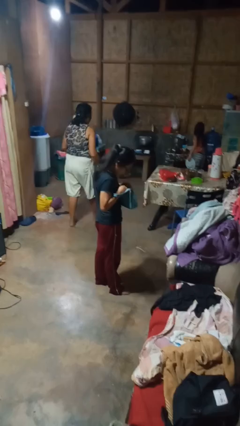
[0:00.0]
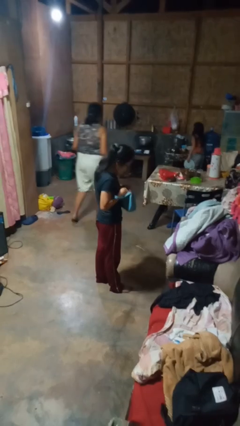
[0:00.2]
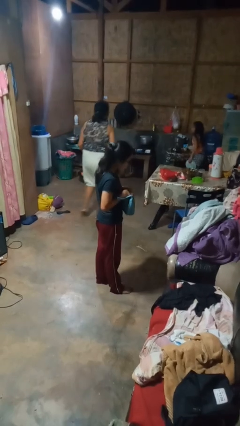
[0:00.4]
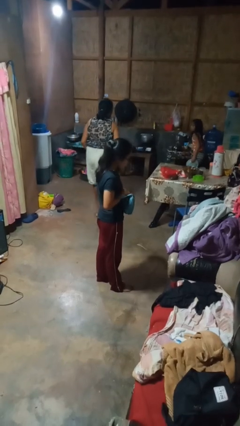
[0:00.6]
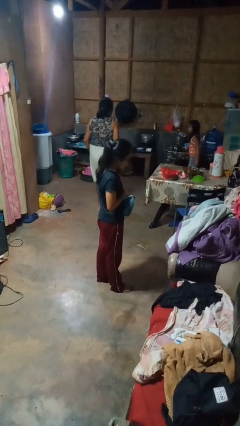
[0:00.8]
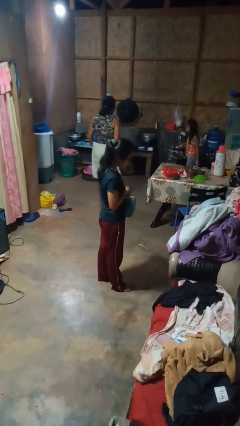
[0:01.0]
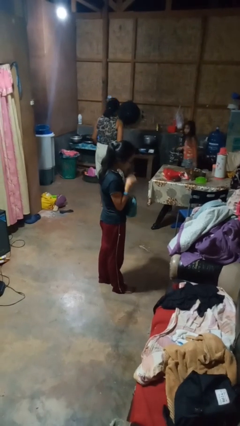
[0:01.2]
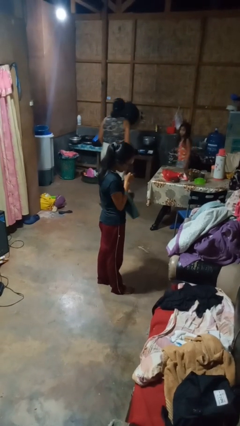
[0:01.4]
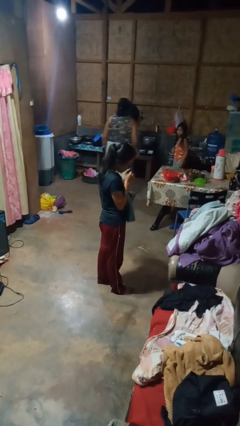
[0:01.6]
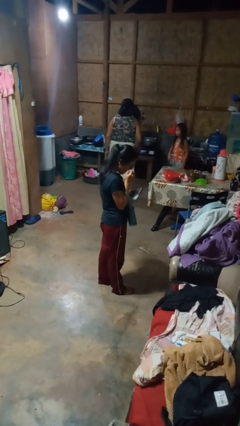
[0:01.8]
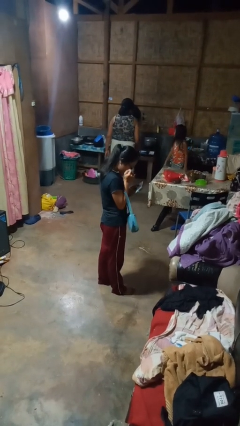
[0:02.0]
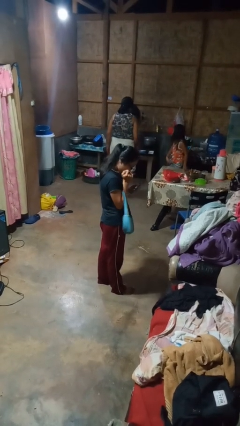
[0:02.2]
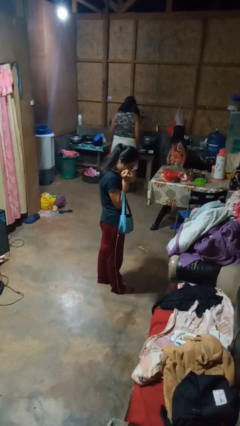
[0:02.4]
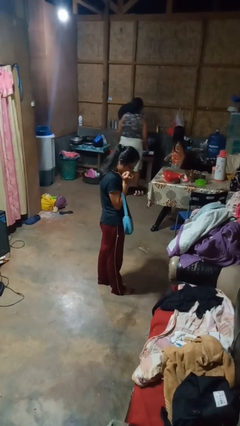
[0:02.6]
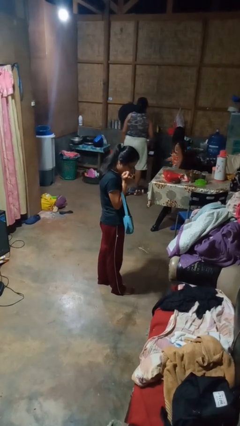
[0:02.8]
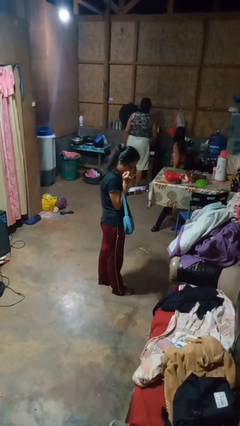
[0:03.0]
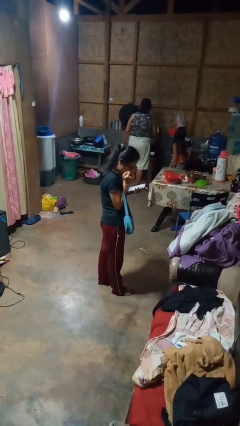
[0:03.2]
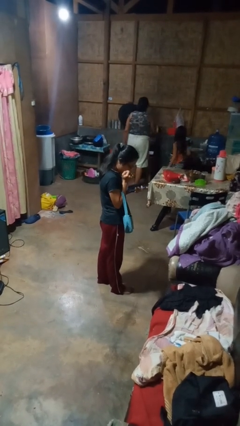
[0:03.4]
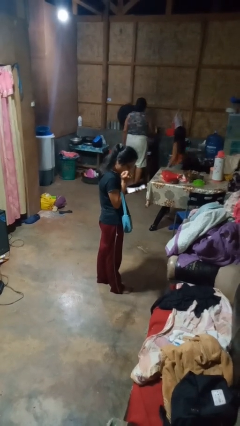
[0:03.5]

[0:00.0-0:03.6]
person takes object from purse

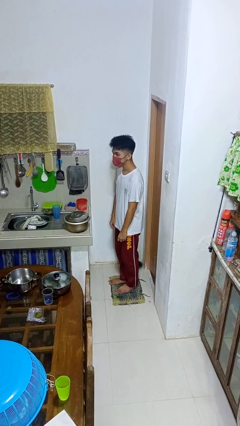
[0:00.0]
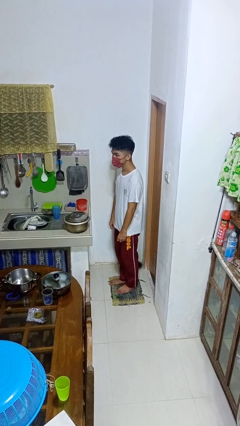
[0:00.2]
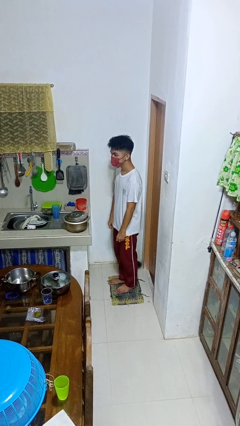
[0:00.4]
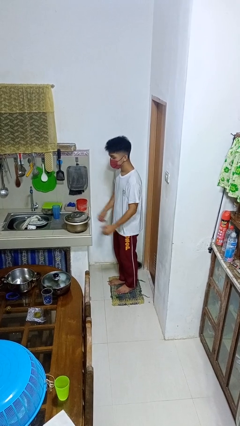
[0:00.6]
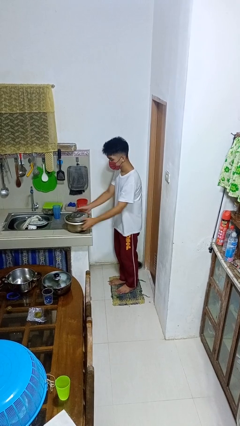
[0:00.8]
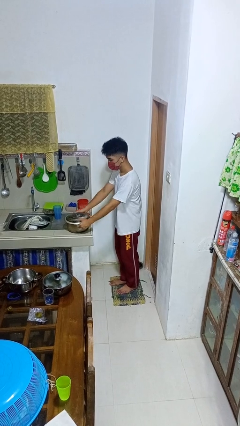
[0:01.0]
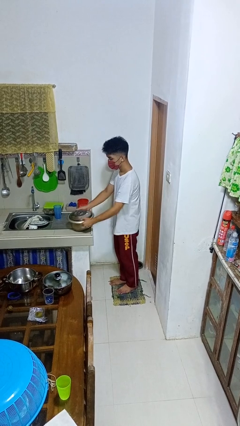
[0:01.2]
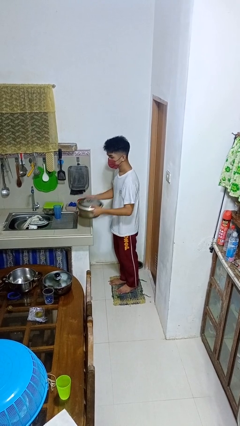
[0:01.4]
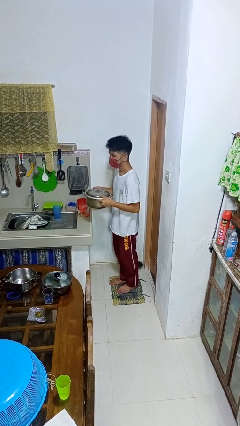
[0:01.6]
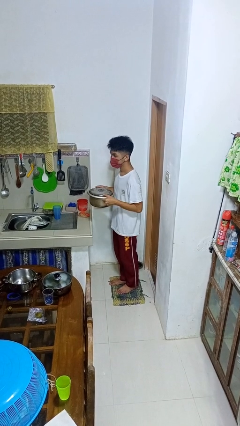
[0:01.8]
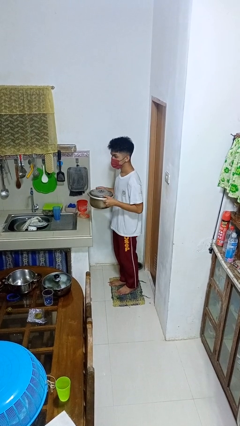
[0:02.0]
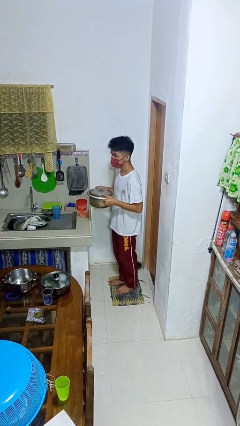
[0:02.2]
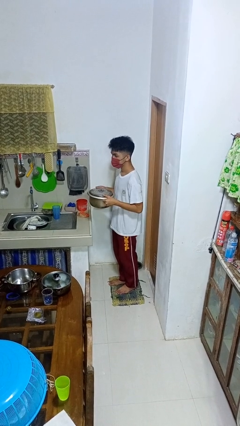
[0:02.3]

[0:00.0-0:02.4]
person picks up object from countertop

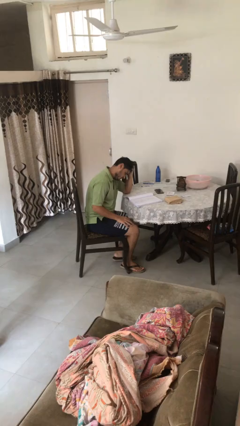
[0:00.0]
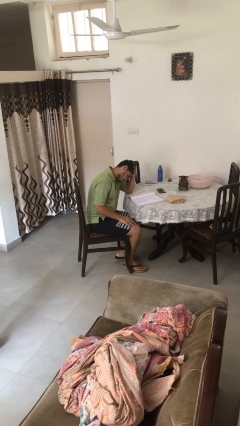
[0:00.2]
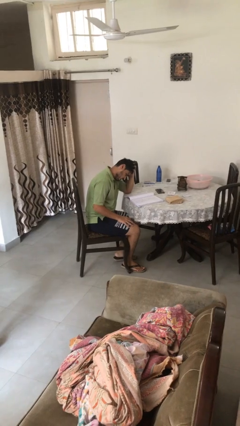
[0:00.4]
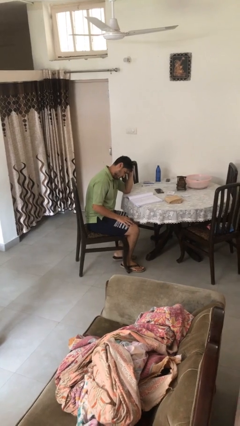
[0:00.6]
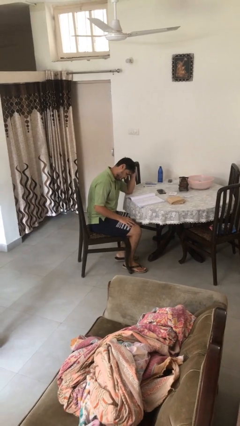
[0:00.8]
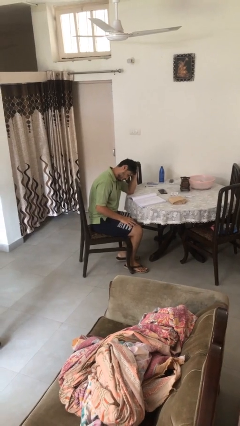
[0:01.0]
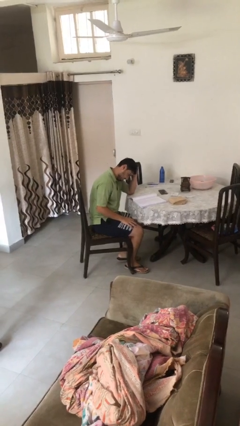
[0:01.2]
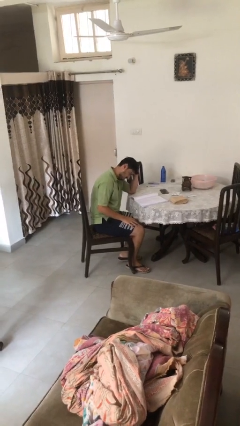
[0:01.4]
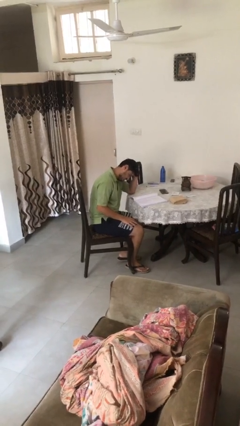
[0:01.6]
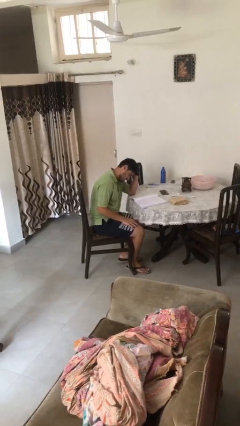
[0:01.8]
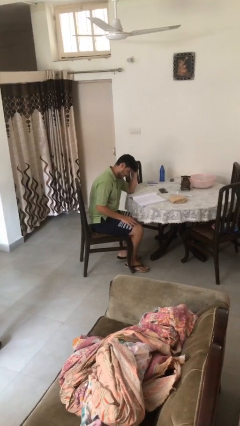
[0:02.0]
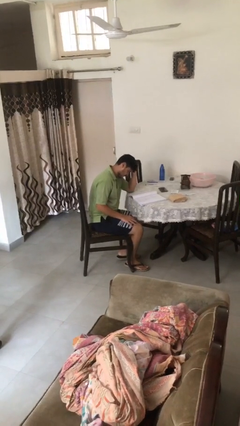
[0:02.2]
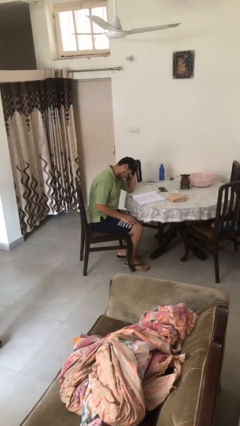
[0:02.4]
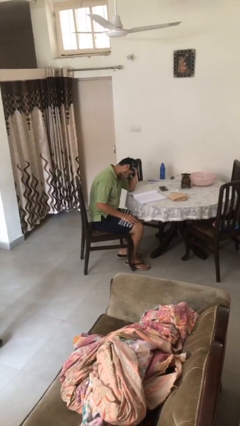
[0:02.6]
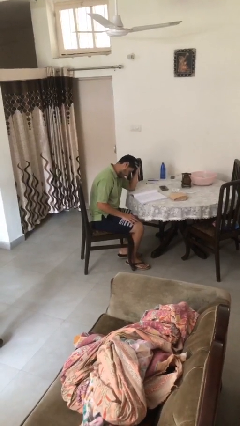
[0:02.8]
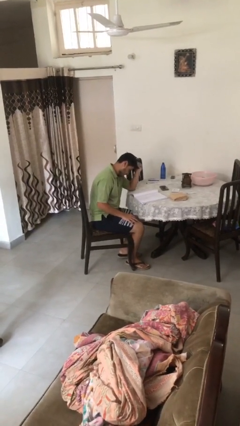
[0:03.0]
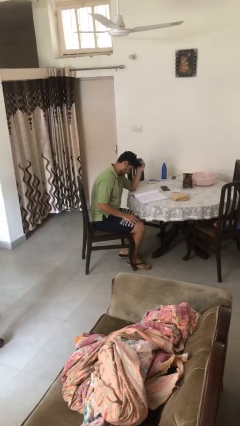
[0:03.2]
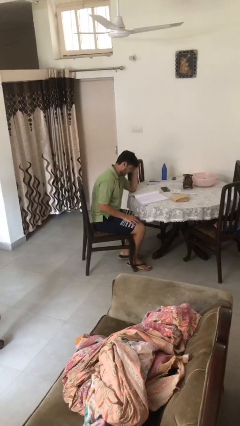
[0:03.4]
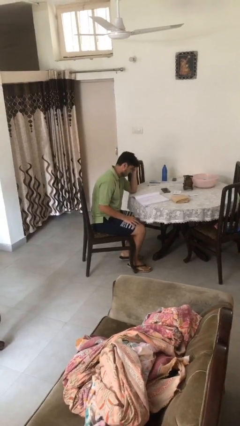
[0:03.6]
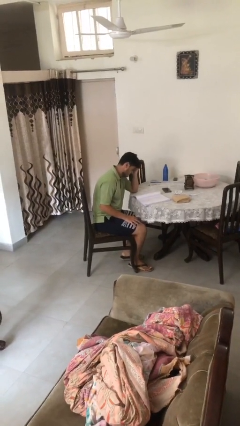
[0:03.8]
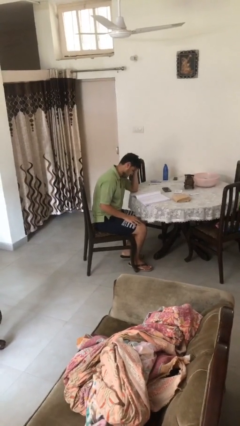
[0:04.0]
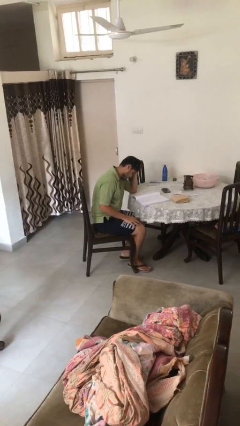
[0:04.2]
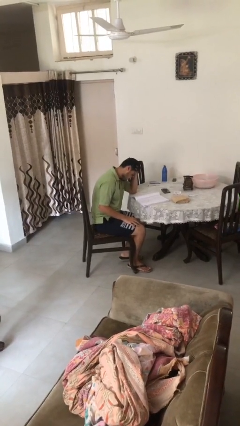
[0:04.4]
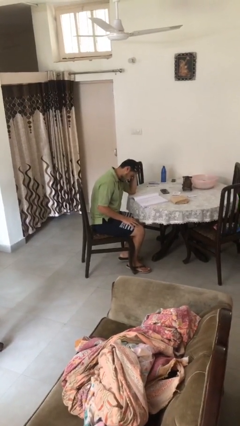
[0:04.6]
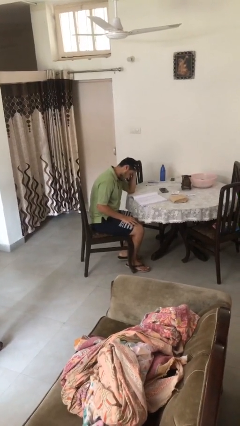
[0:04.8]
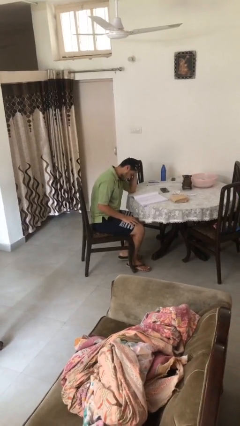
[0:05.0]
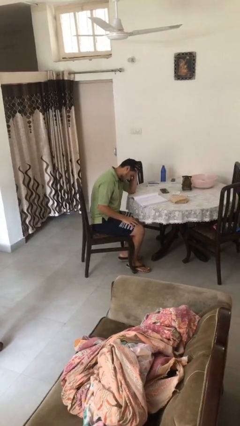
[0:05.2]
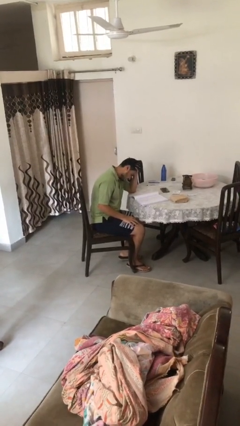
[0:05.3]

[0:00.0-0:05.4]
person reads document

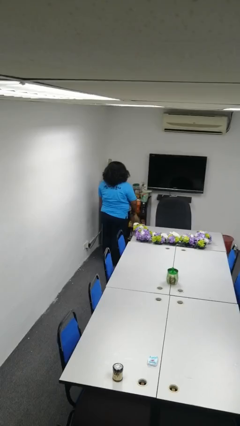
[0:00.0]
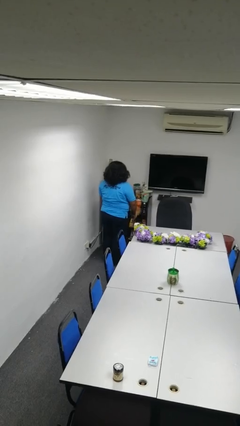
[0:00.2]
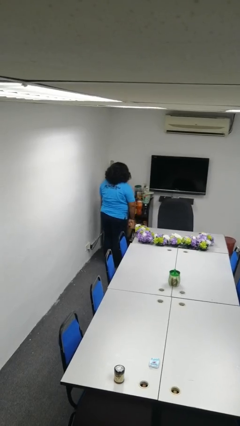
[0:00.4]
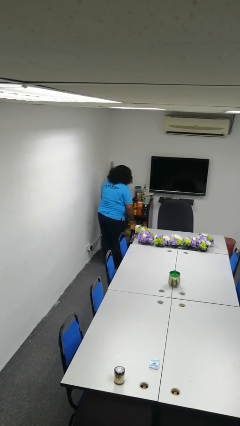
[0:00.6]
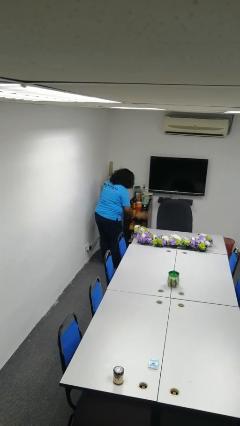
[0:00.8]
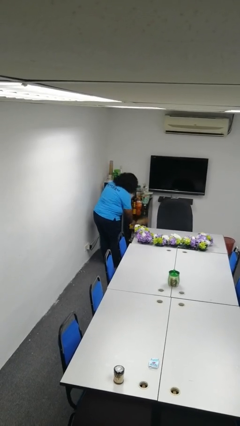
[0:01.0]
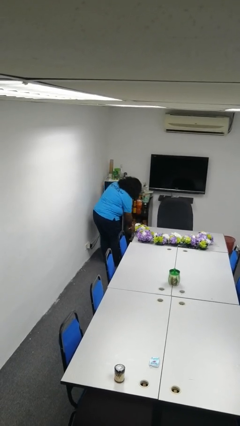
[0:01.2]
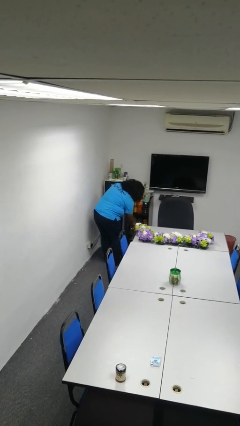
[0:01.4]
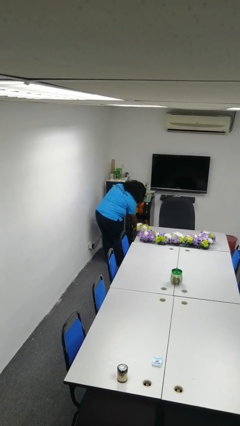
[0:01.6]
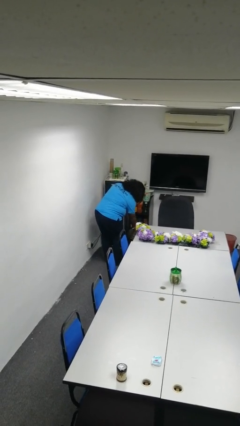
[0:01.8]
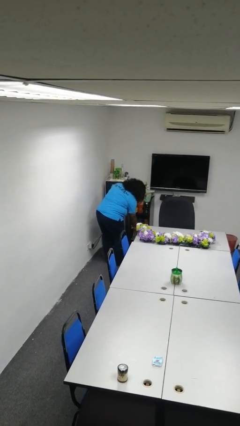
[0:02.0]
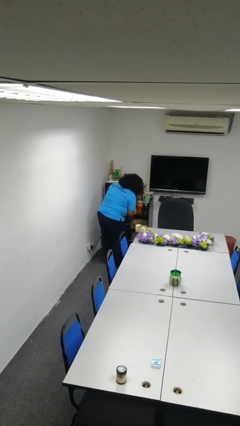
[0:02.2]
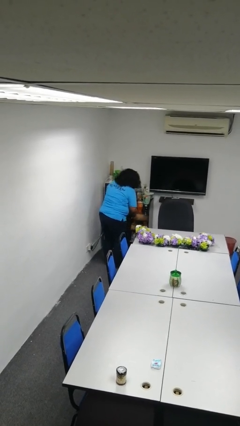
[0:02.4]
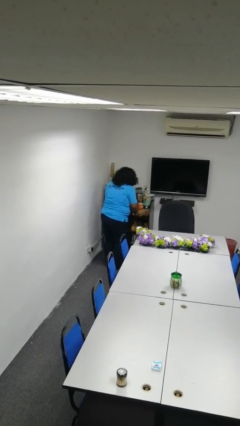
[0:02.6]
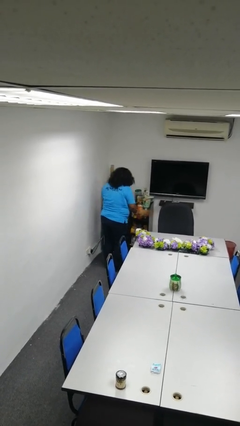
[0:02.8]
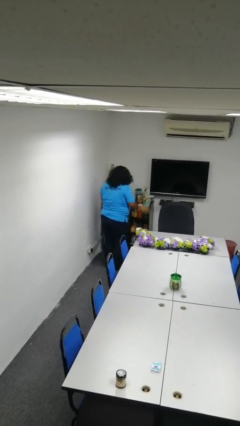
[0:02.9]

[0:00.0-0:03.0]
person dusts furniture

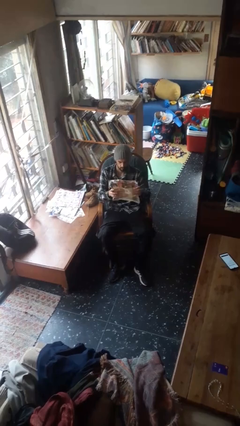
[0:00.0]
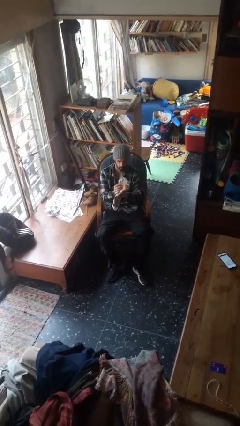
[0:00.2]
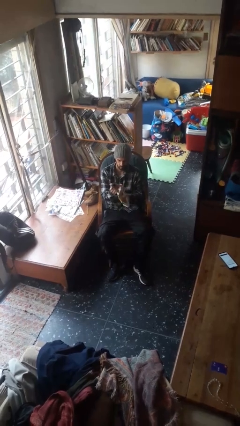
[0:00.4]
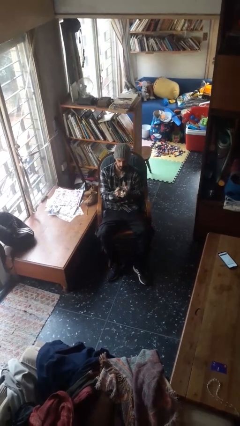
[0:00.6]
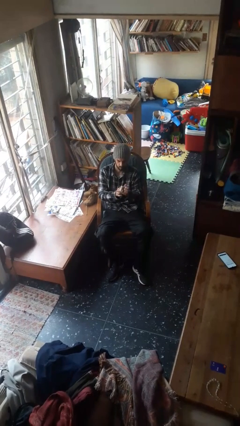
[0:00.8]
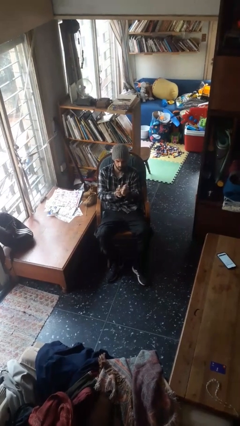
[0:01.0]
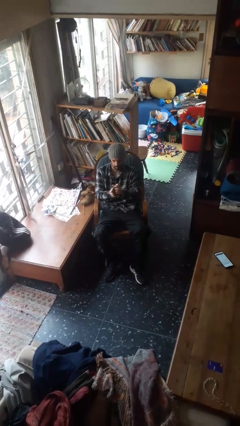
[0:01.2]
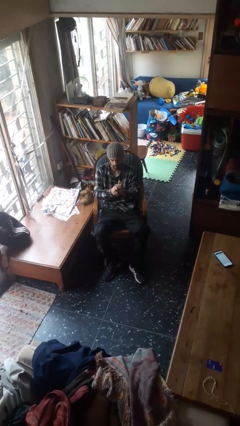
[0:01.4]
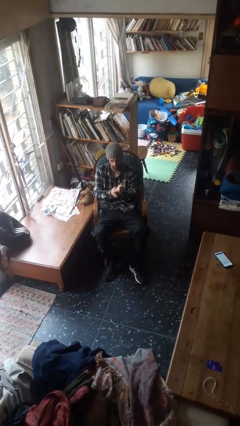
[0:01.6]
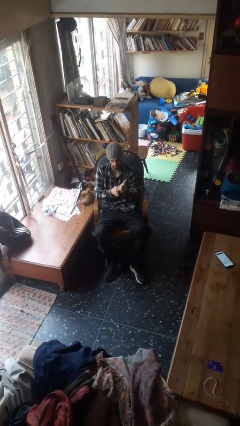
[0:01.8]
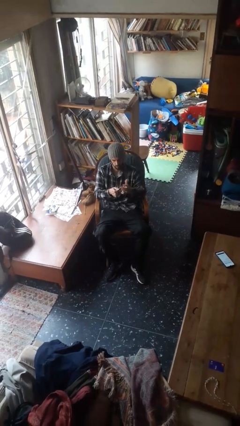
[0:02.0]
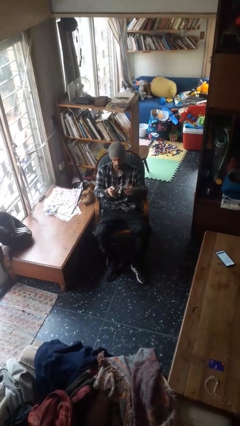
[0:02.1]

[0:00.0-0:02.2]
person crumples paper

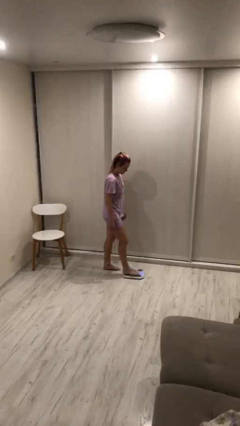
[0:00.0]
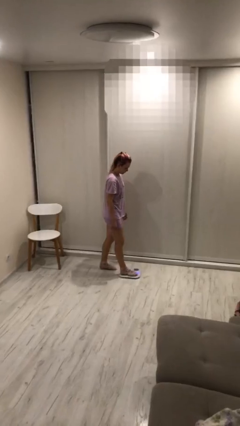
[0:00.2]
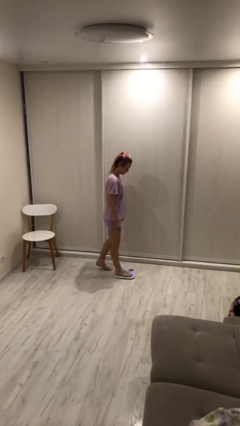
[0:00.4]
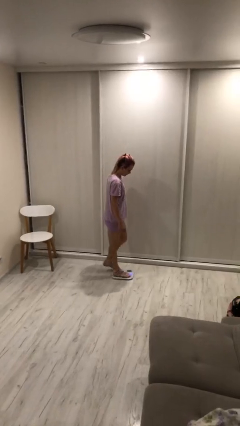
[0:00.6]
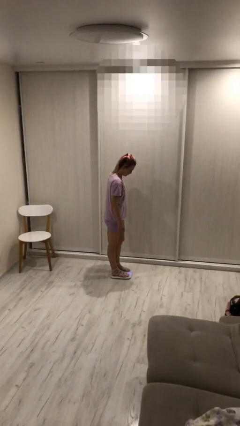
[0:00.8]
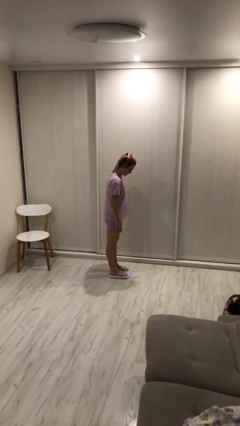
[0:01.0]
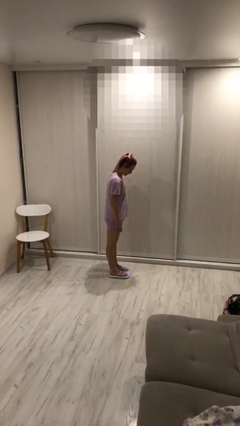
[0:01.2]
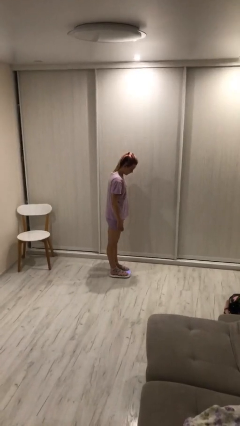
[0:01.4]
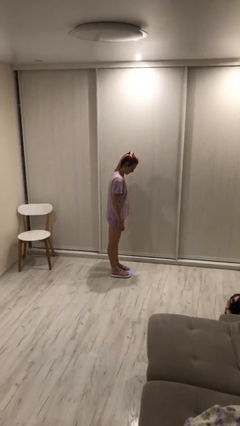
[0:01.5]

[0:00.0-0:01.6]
person uses bodyweight scale
